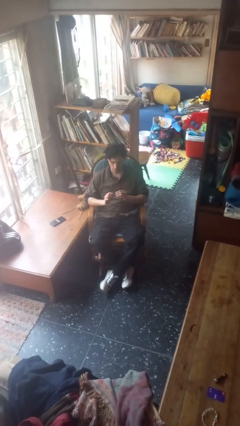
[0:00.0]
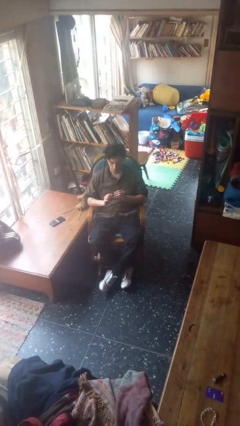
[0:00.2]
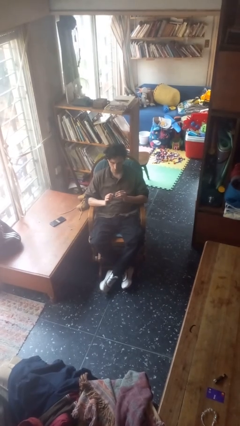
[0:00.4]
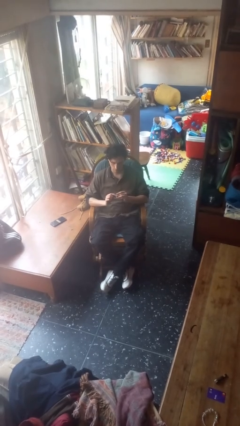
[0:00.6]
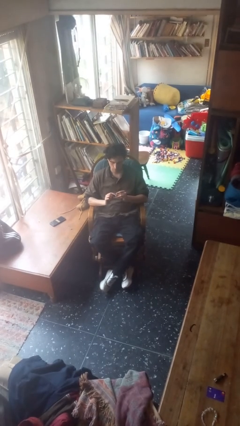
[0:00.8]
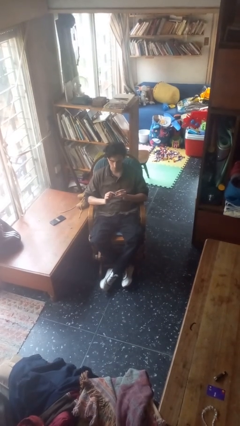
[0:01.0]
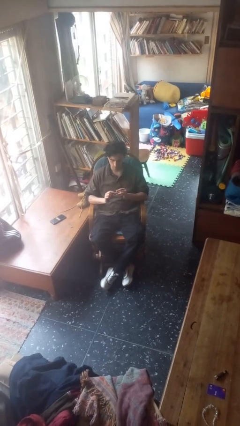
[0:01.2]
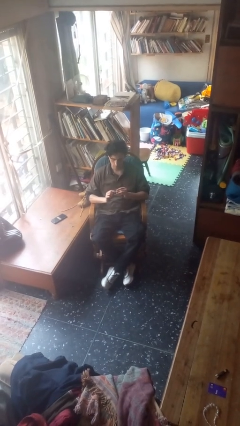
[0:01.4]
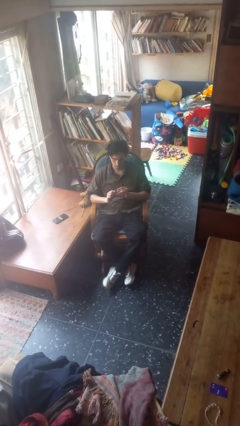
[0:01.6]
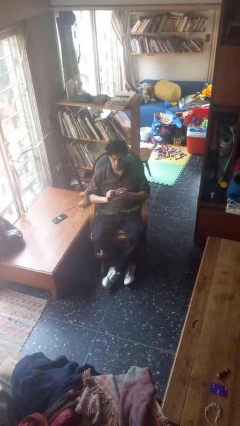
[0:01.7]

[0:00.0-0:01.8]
person files fingernails

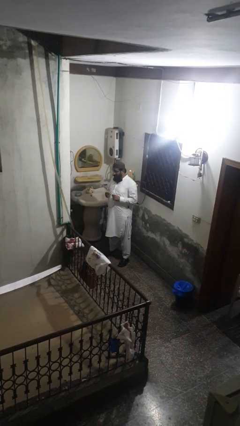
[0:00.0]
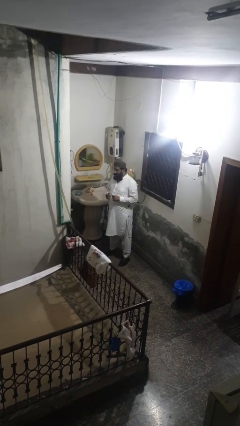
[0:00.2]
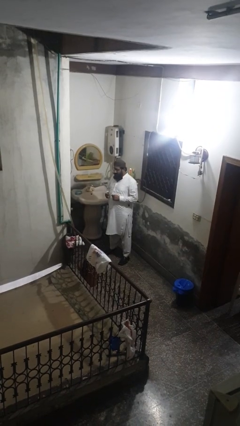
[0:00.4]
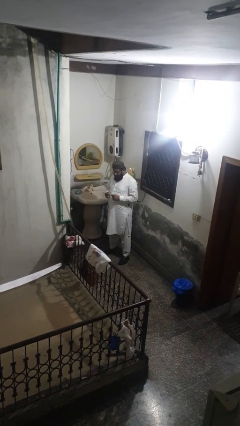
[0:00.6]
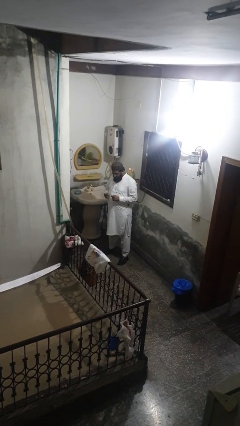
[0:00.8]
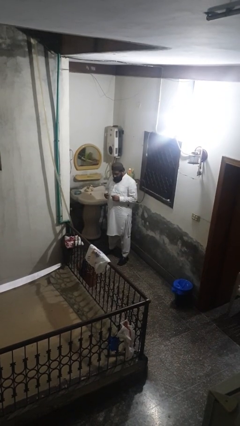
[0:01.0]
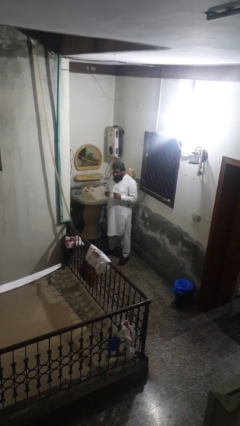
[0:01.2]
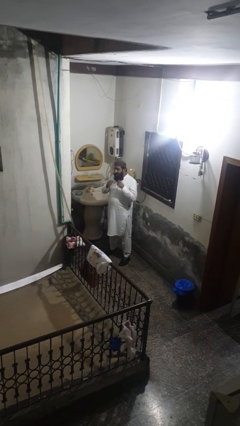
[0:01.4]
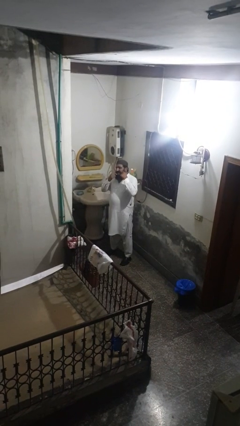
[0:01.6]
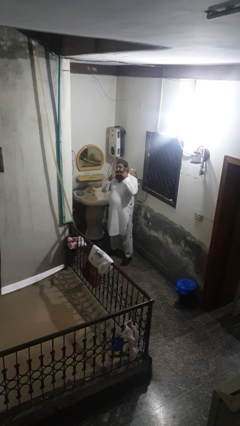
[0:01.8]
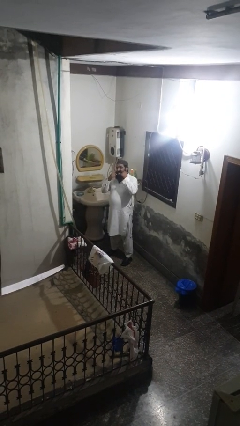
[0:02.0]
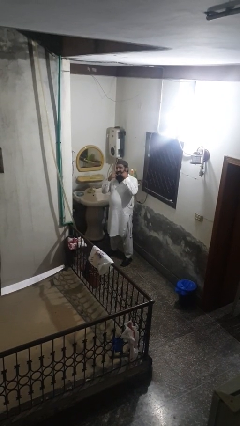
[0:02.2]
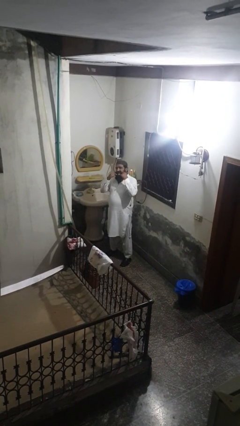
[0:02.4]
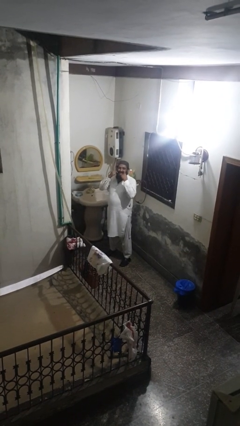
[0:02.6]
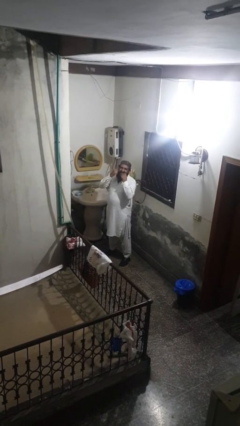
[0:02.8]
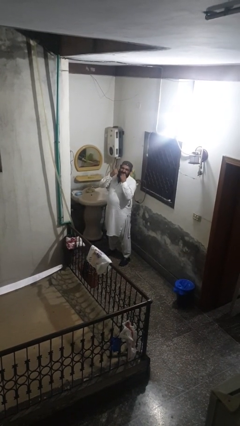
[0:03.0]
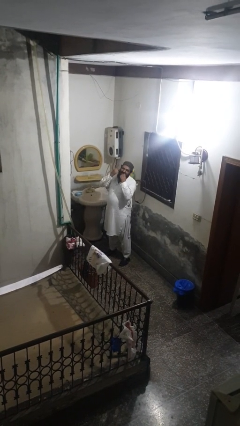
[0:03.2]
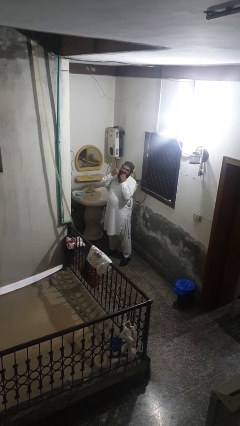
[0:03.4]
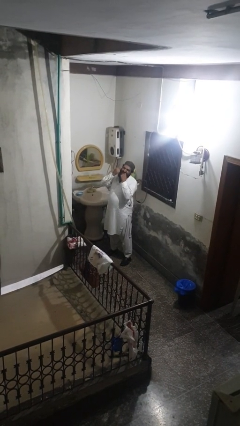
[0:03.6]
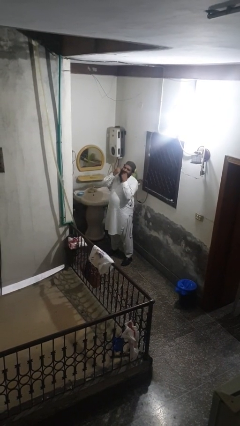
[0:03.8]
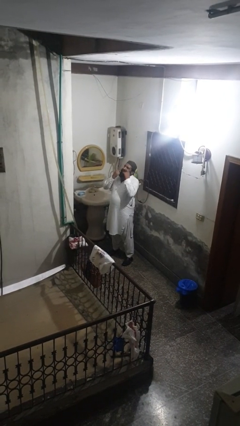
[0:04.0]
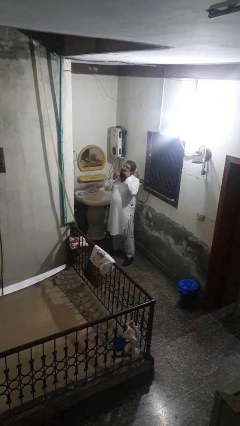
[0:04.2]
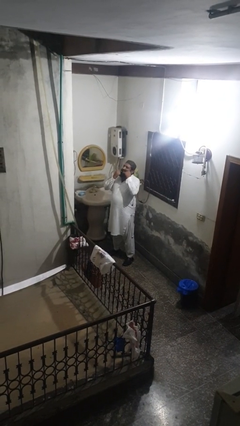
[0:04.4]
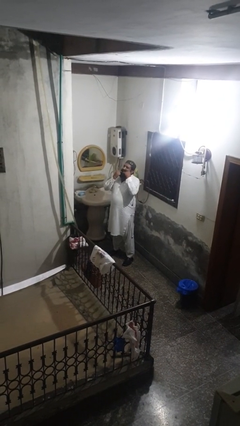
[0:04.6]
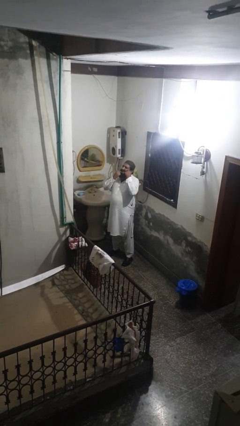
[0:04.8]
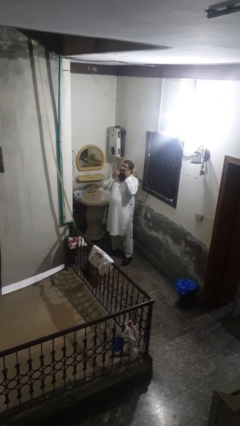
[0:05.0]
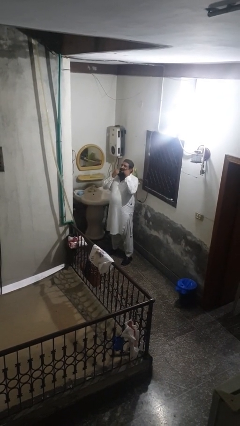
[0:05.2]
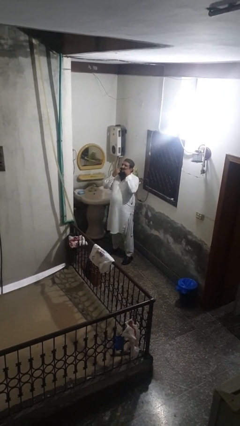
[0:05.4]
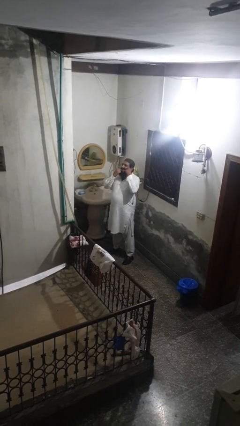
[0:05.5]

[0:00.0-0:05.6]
person flosses

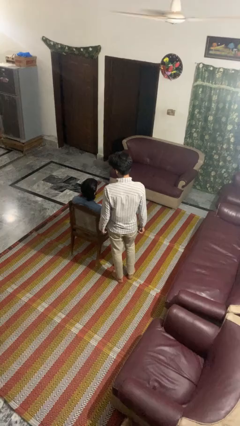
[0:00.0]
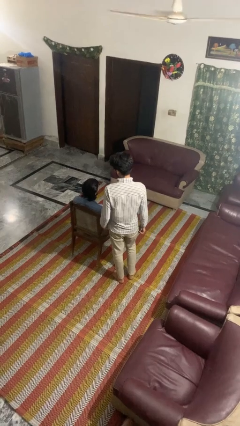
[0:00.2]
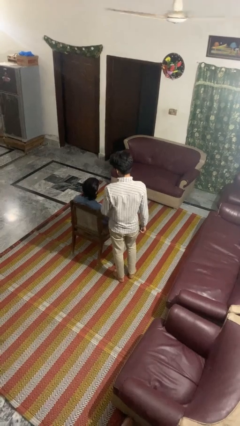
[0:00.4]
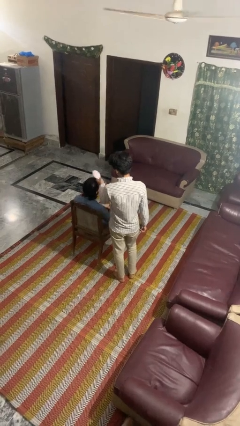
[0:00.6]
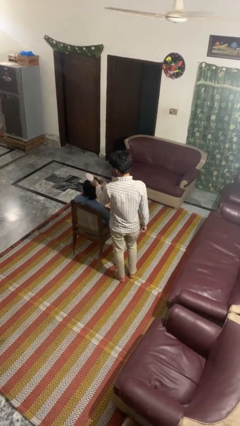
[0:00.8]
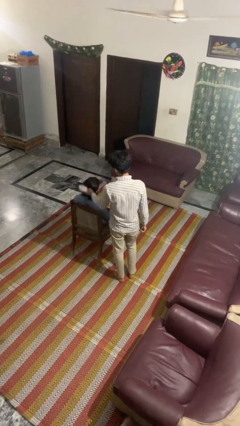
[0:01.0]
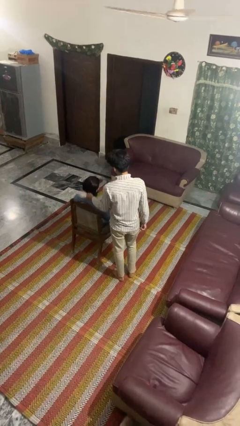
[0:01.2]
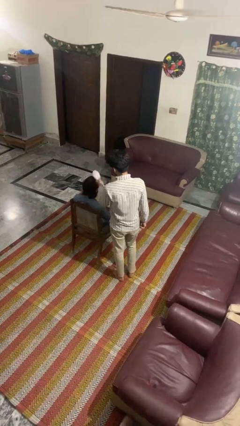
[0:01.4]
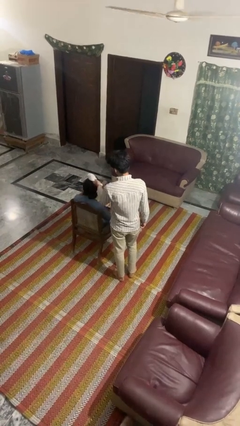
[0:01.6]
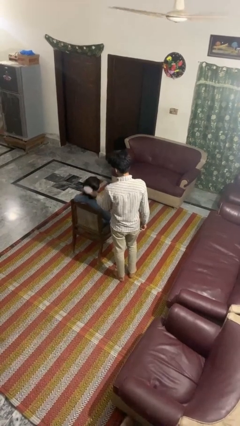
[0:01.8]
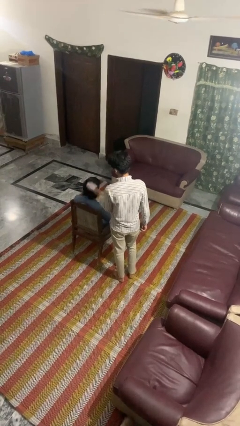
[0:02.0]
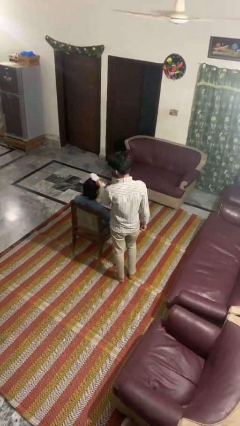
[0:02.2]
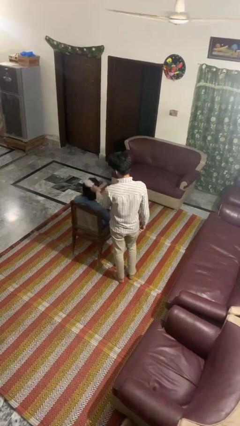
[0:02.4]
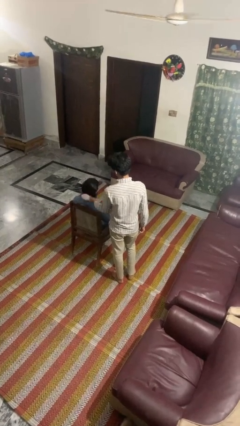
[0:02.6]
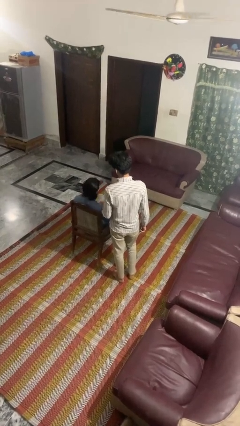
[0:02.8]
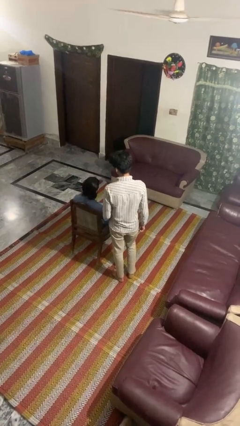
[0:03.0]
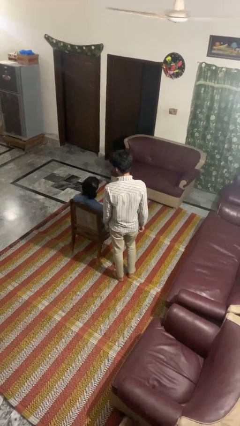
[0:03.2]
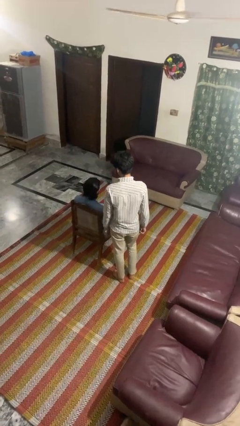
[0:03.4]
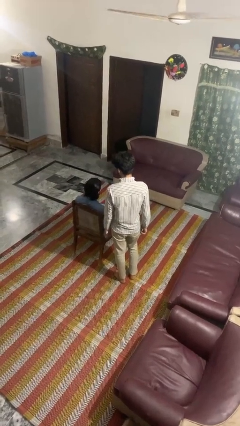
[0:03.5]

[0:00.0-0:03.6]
person brushes hair of person

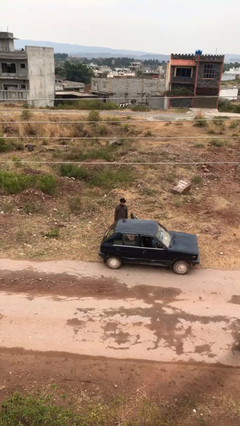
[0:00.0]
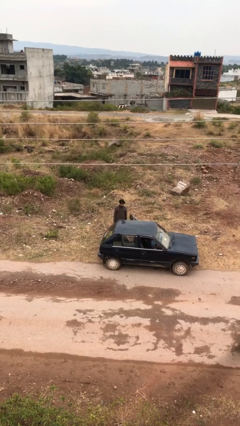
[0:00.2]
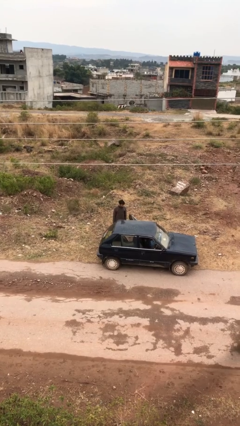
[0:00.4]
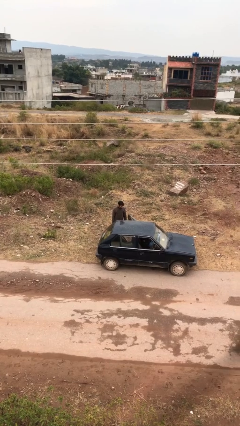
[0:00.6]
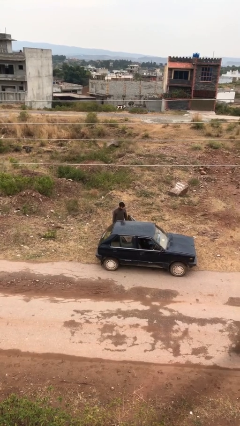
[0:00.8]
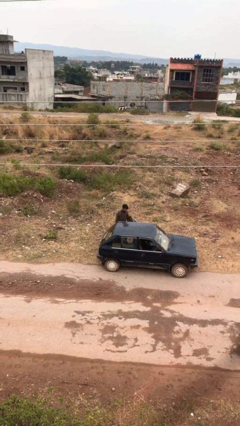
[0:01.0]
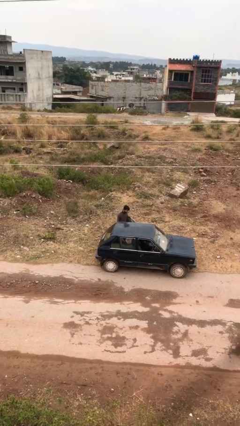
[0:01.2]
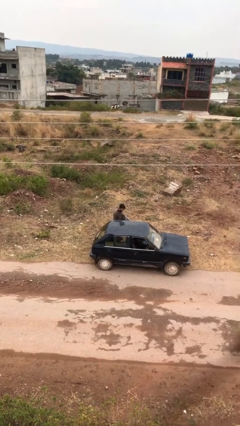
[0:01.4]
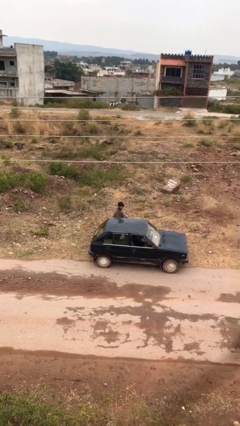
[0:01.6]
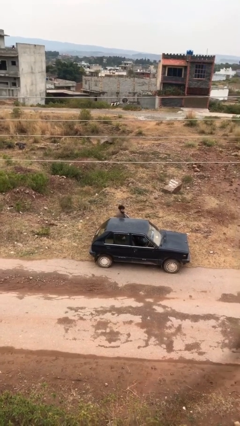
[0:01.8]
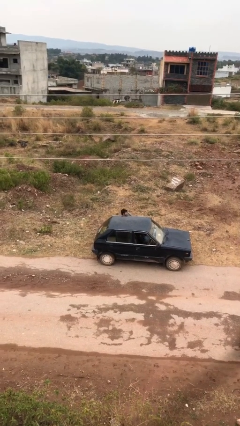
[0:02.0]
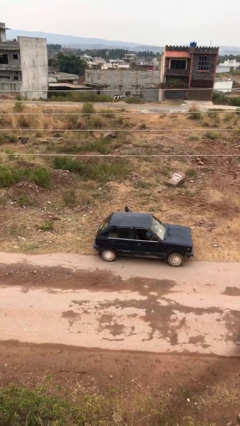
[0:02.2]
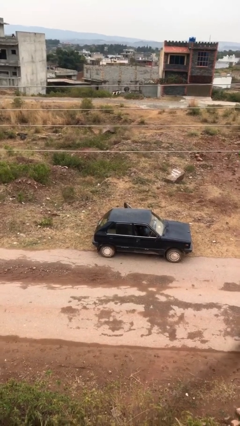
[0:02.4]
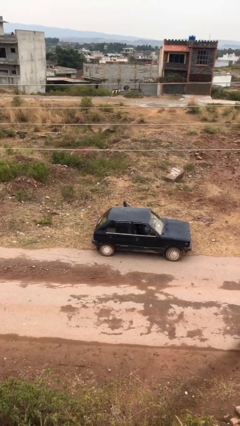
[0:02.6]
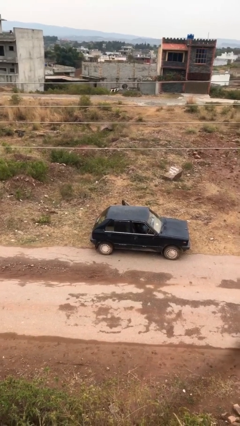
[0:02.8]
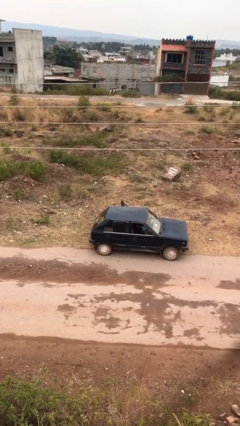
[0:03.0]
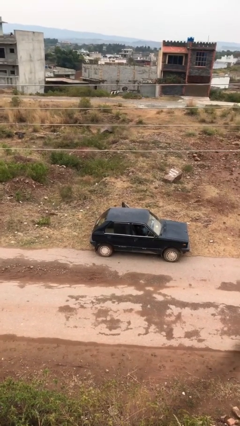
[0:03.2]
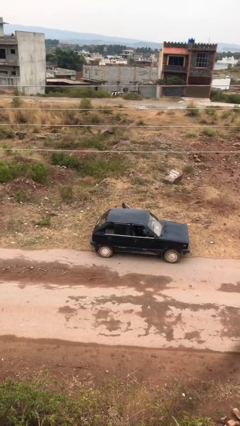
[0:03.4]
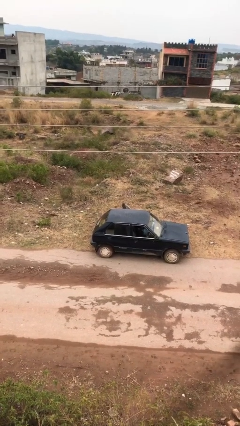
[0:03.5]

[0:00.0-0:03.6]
person enters car

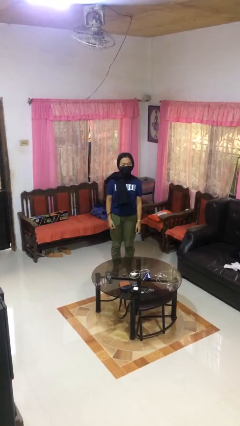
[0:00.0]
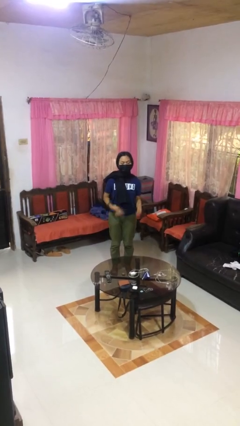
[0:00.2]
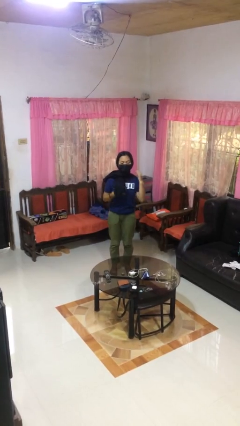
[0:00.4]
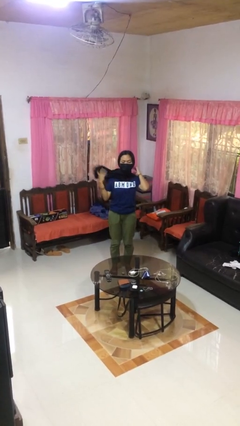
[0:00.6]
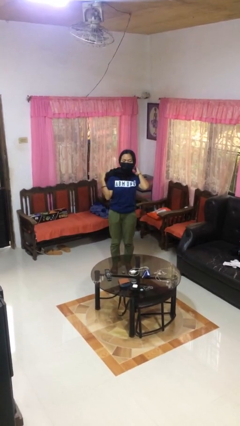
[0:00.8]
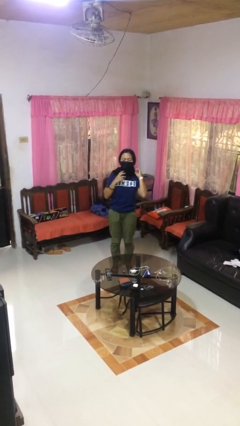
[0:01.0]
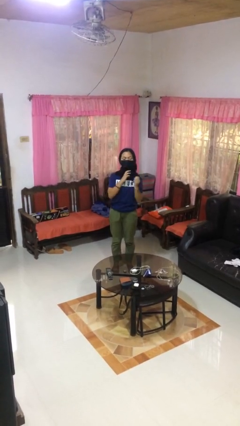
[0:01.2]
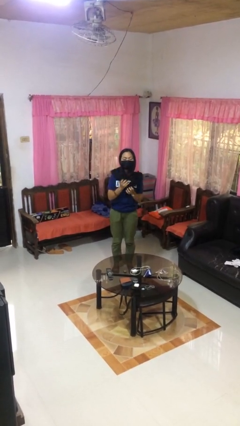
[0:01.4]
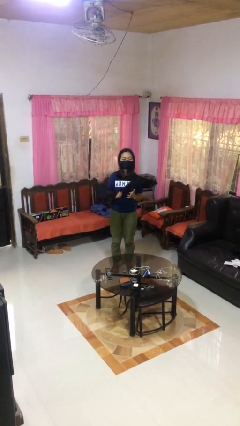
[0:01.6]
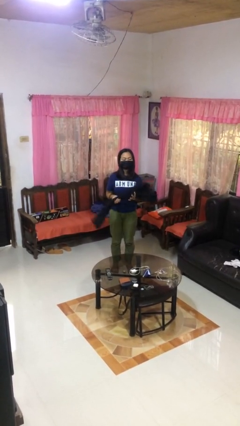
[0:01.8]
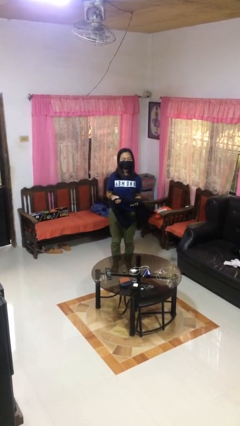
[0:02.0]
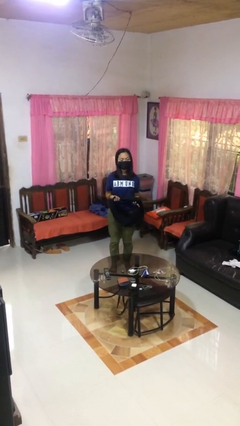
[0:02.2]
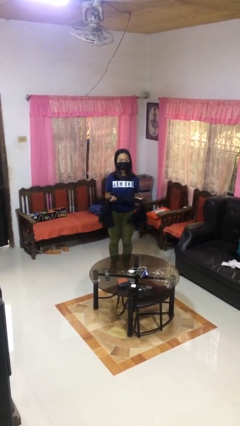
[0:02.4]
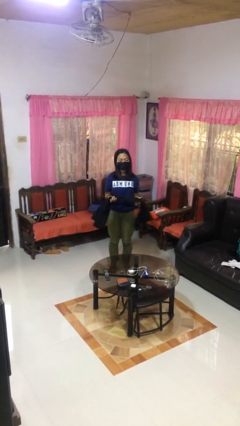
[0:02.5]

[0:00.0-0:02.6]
person takes off scarf

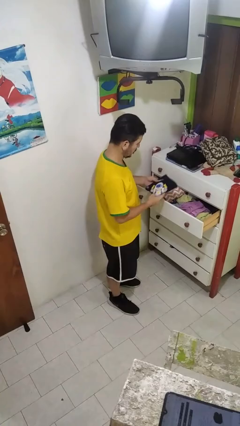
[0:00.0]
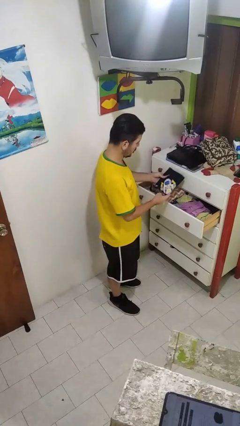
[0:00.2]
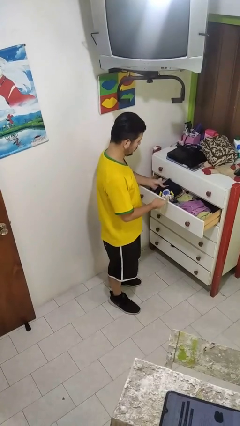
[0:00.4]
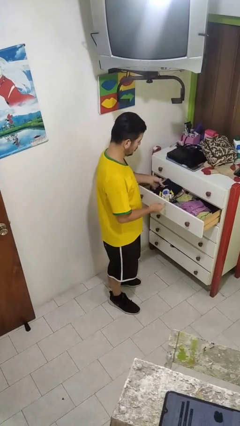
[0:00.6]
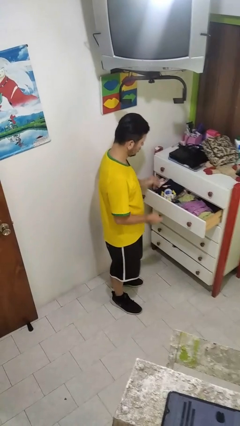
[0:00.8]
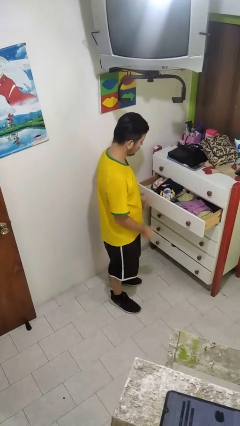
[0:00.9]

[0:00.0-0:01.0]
person puts clothes into dresser
